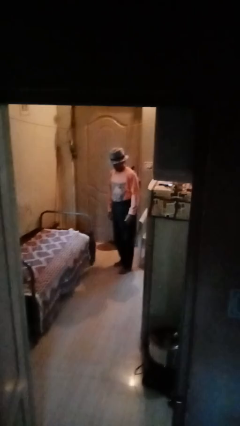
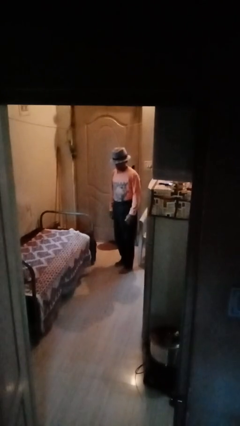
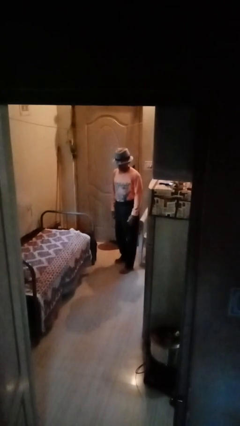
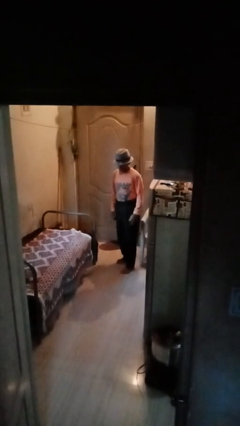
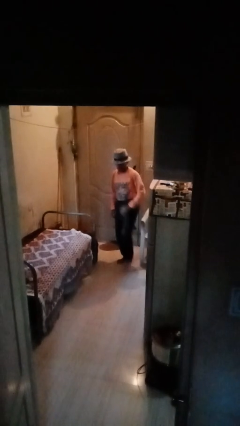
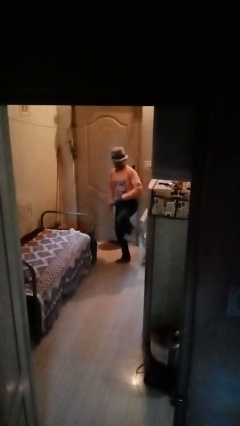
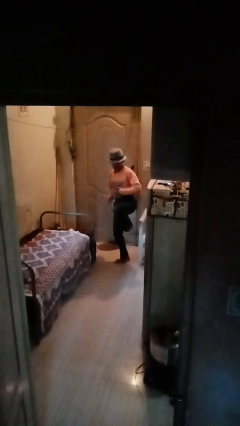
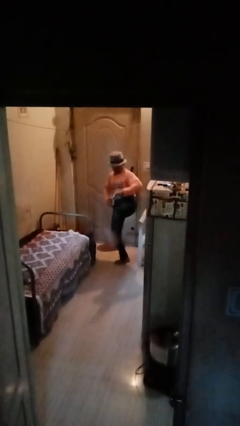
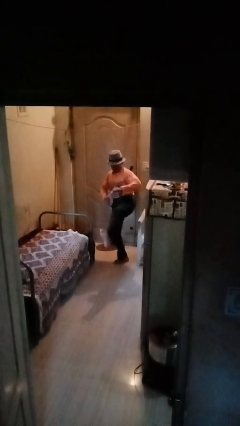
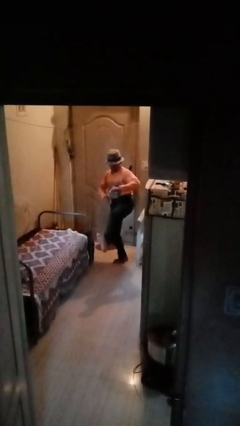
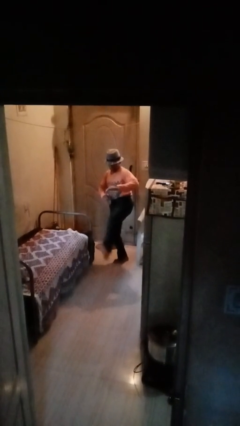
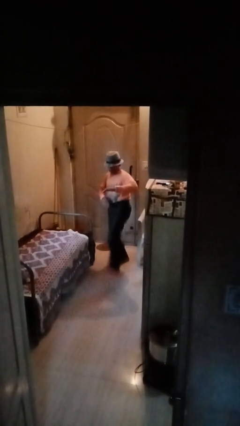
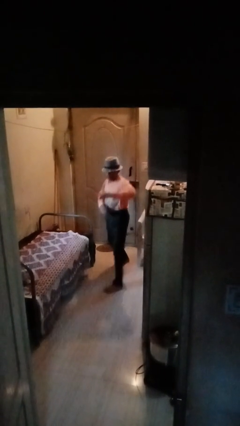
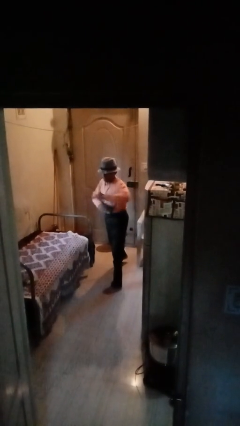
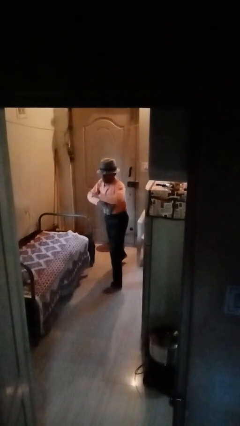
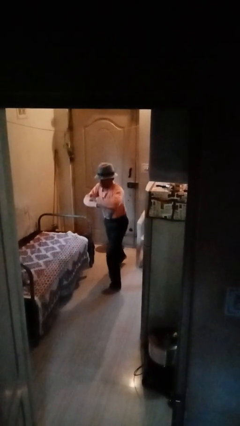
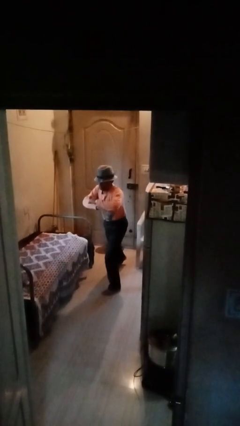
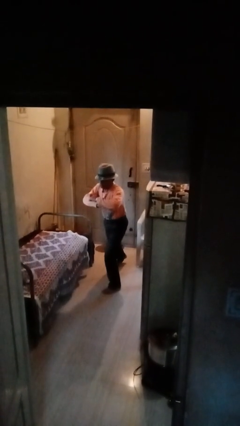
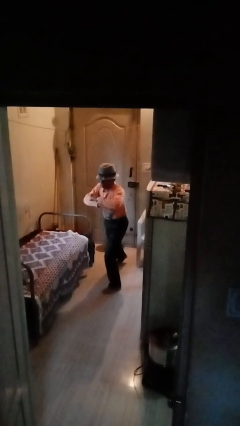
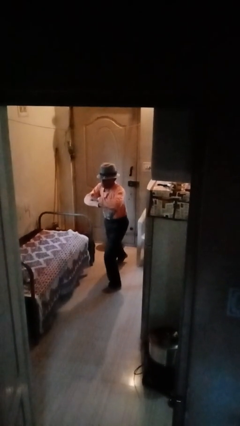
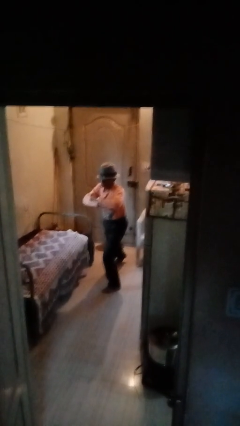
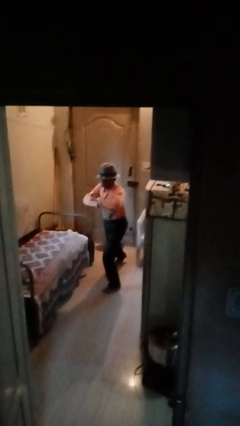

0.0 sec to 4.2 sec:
person karate kicks

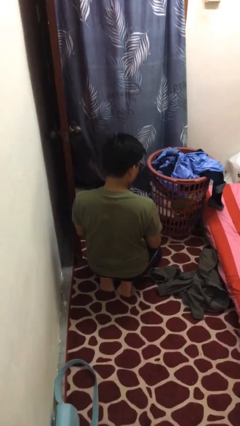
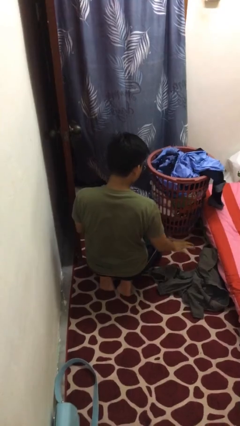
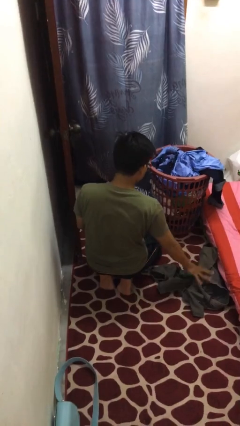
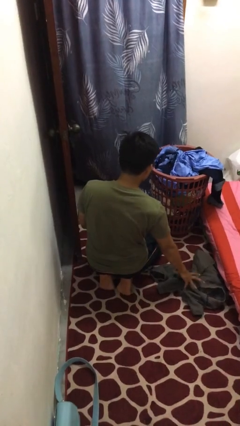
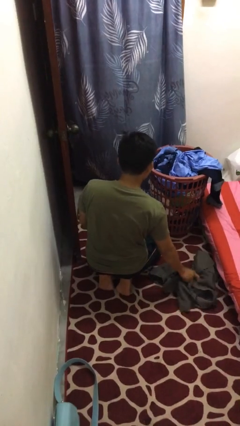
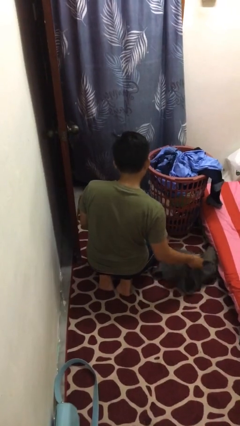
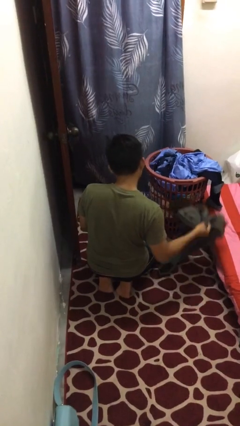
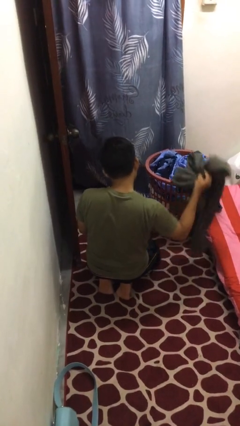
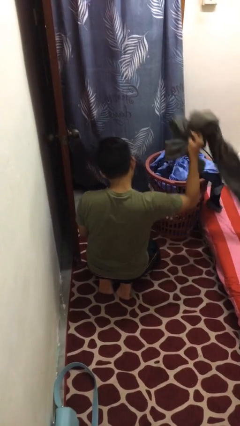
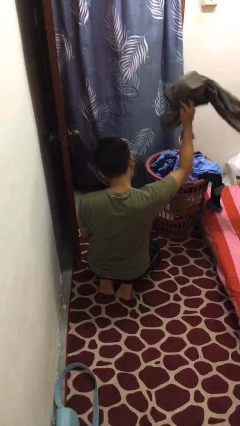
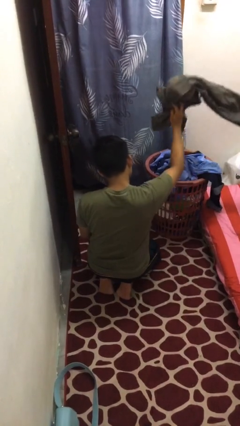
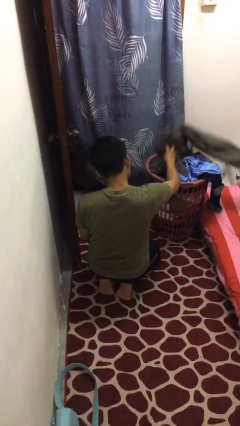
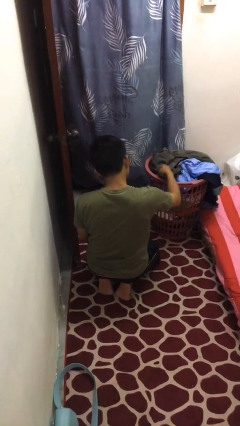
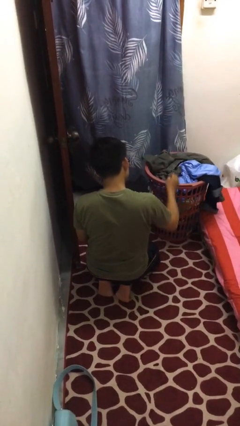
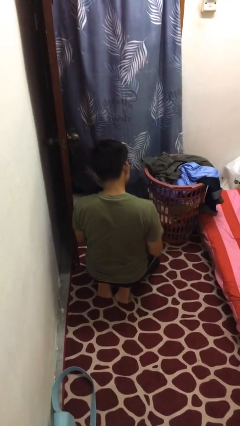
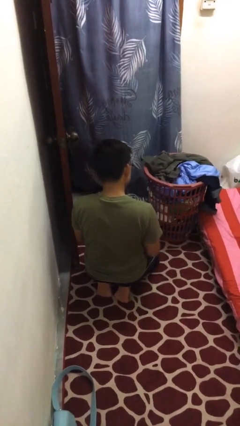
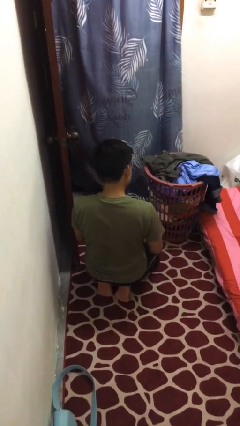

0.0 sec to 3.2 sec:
person puts object into basket

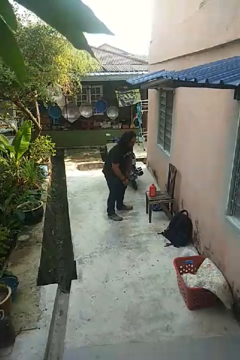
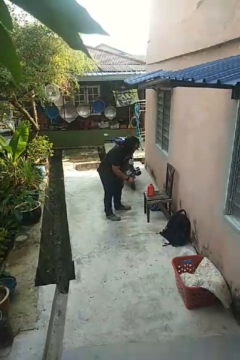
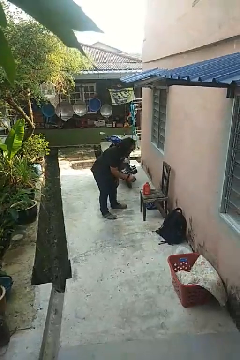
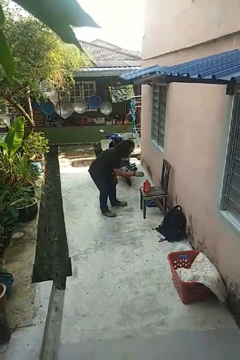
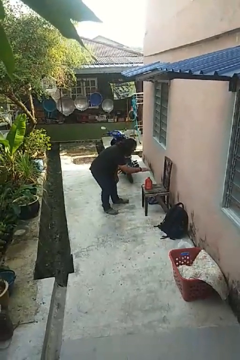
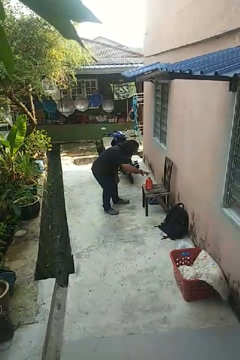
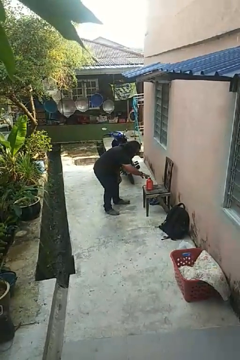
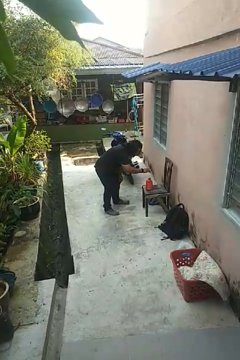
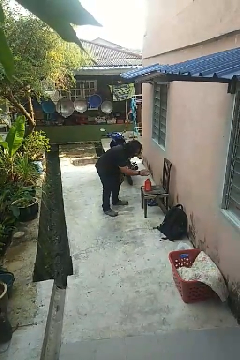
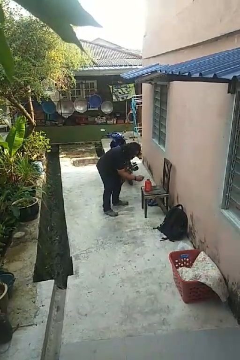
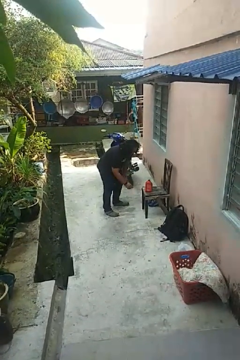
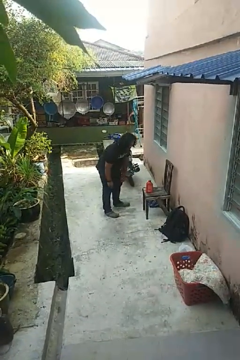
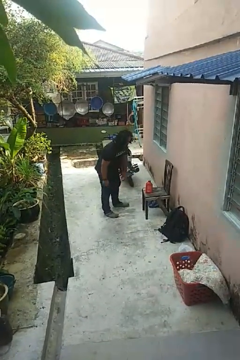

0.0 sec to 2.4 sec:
person waves hand over object

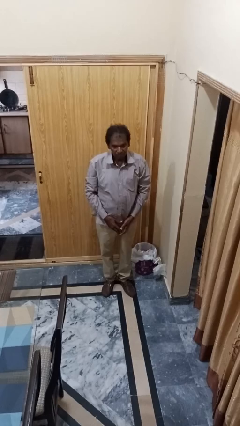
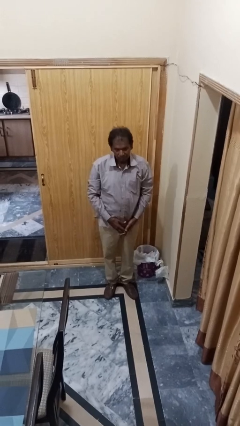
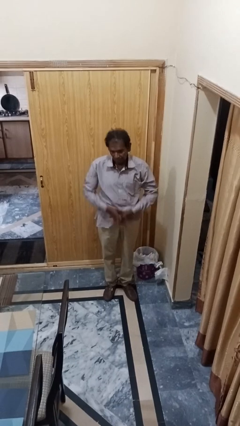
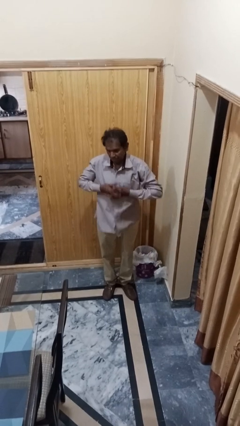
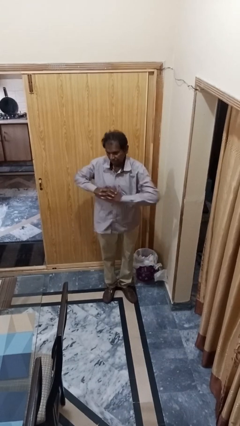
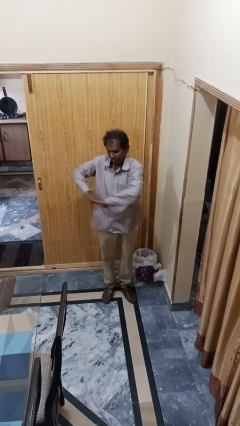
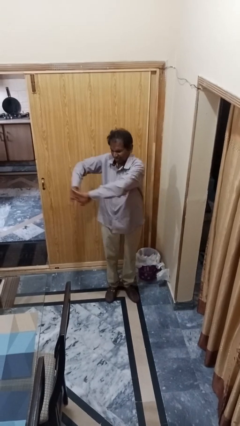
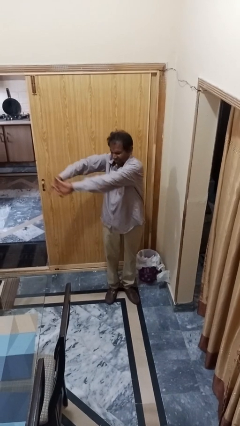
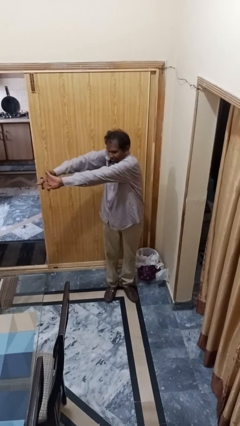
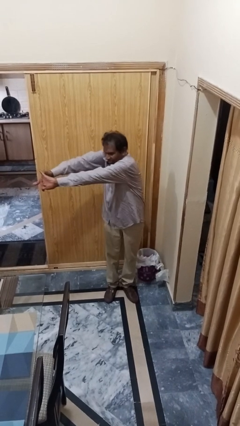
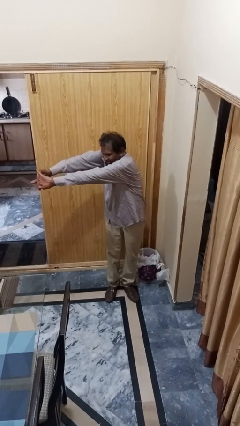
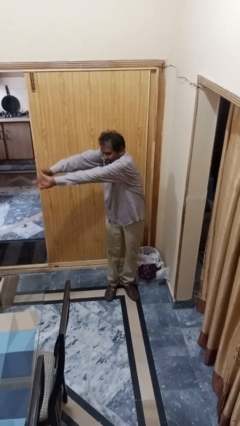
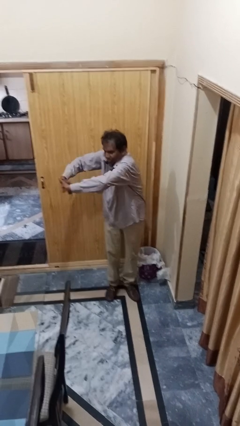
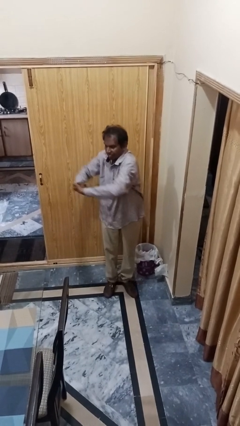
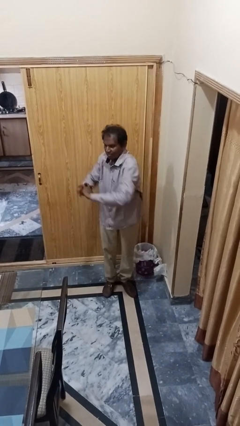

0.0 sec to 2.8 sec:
person cracks knuckles

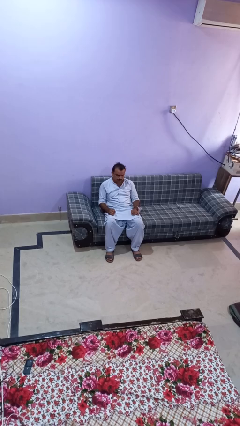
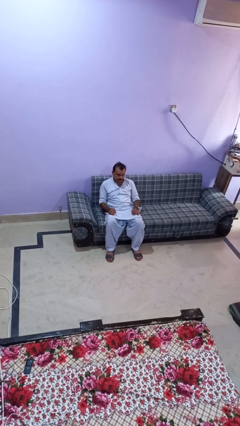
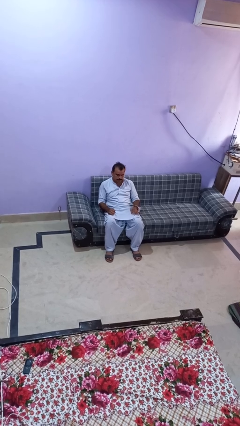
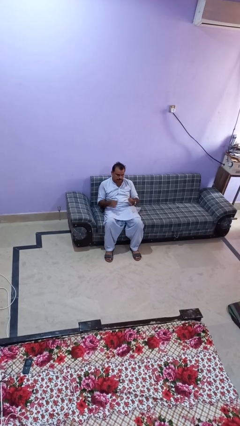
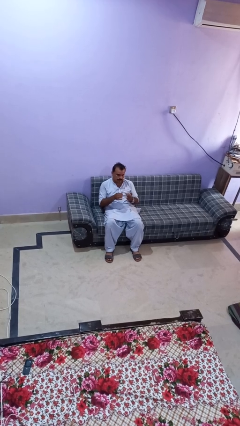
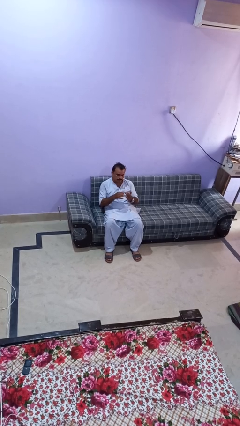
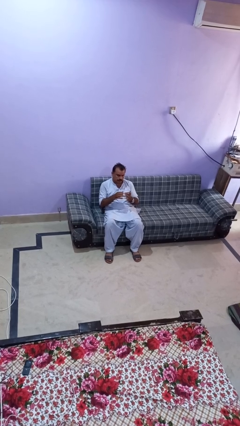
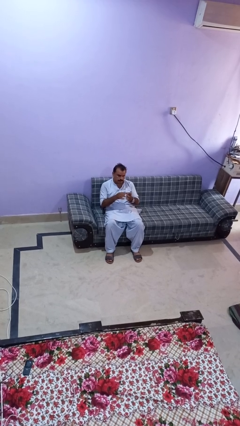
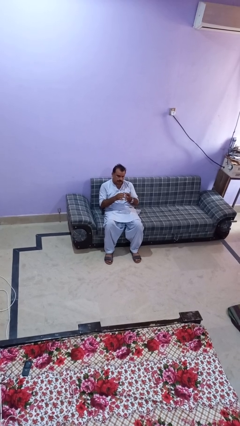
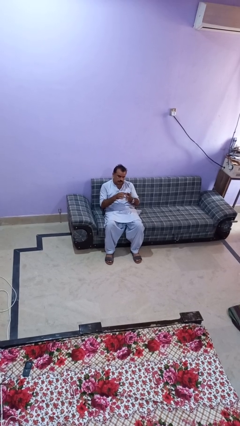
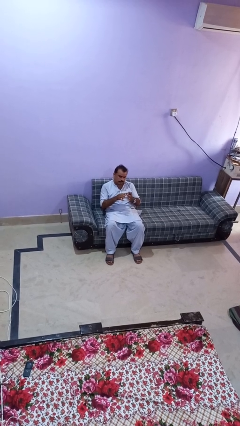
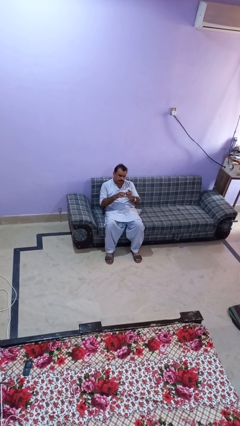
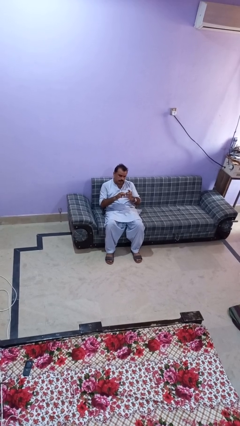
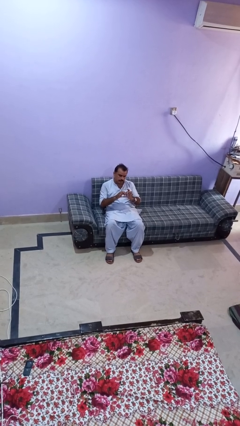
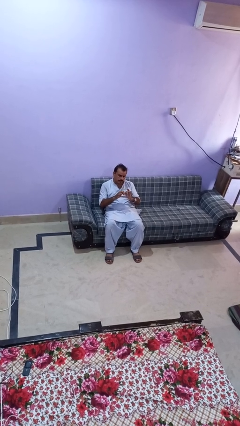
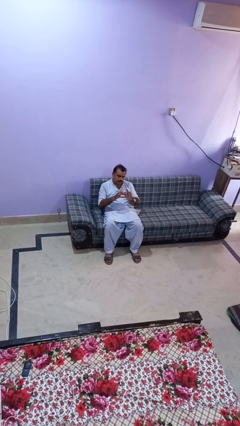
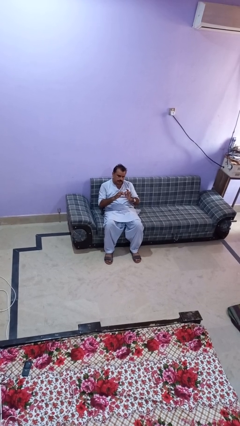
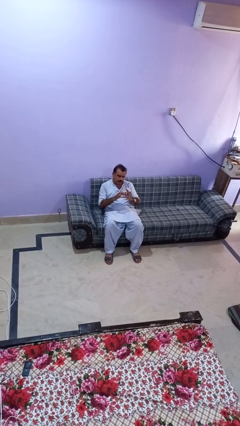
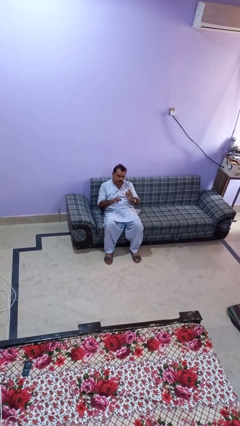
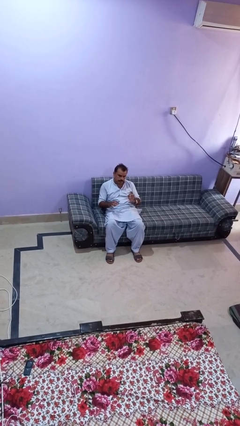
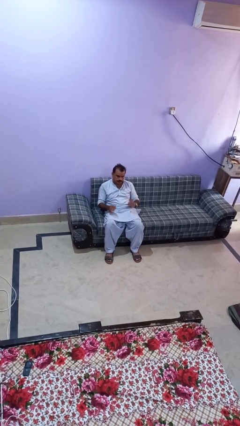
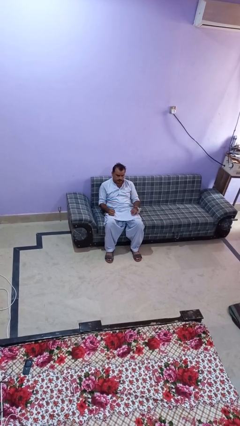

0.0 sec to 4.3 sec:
person files fingernails

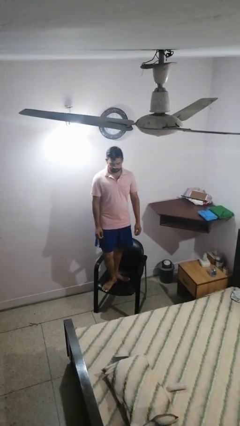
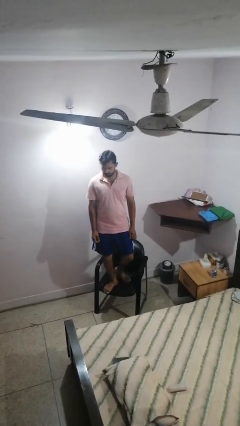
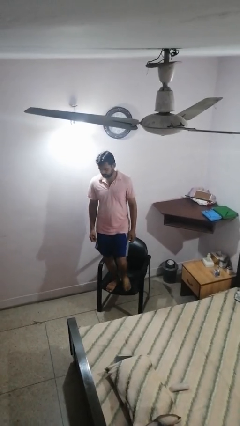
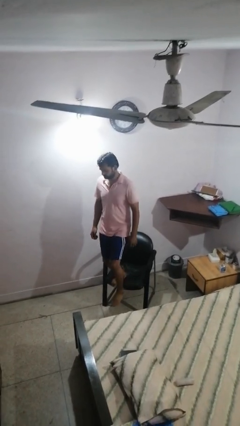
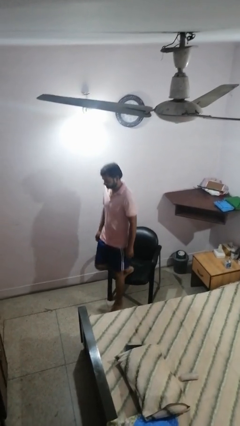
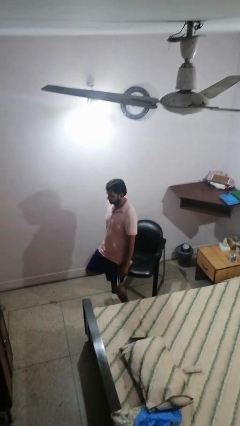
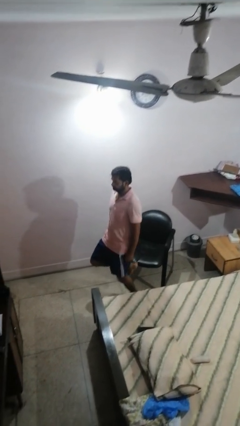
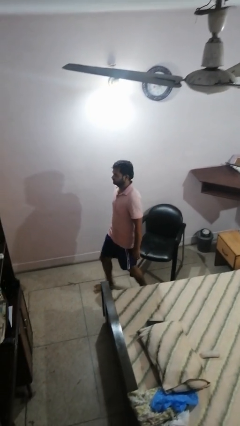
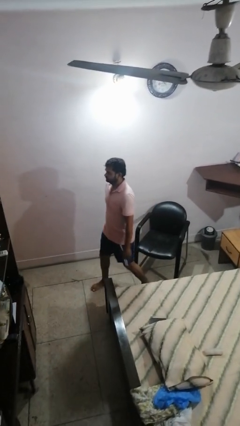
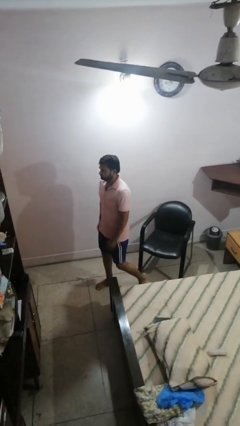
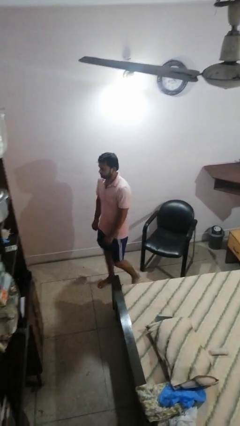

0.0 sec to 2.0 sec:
person climbs off chair
